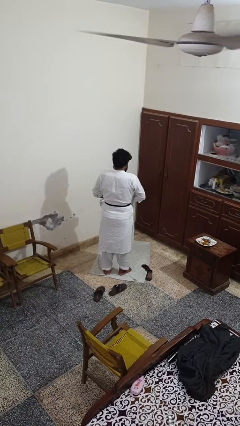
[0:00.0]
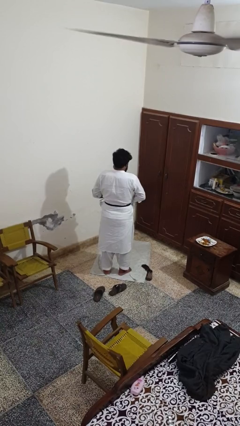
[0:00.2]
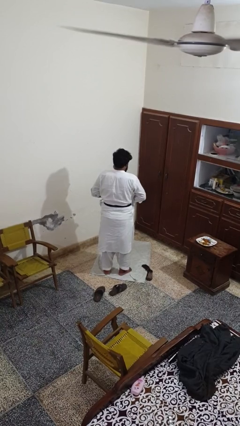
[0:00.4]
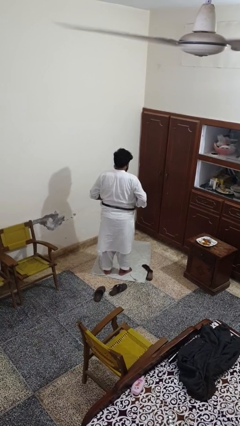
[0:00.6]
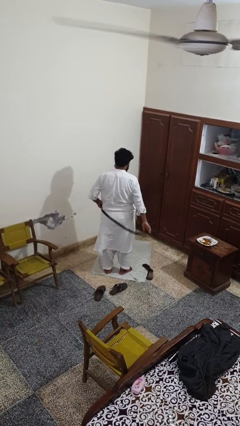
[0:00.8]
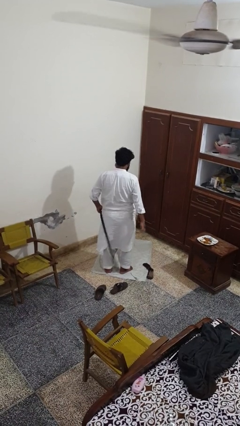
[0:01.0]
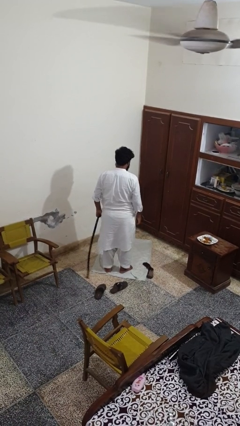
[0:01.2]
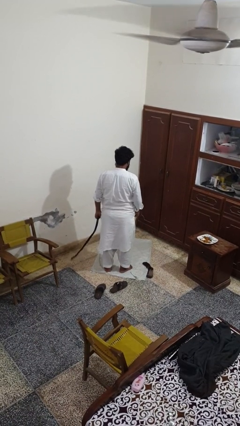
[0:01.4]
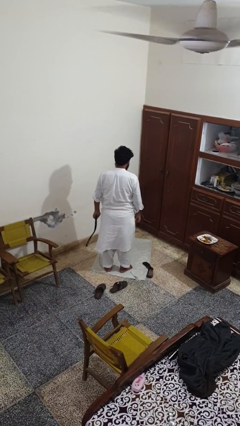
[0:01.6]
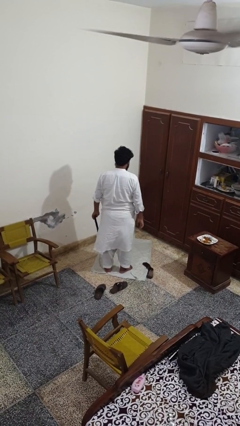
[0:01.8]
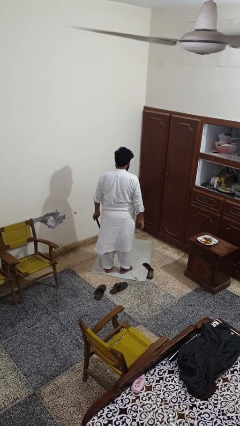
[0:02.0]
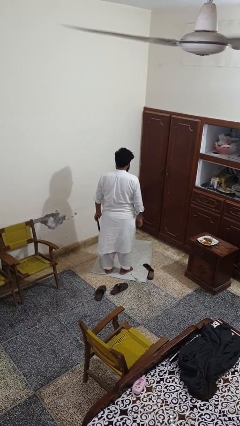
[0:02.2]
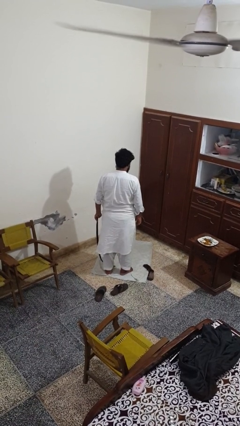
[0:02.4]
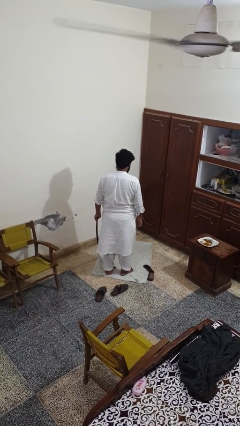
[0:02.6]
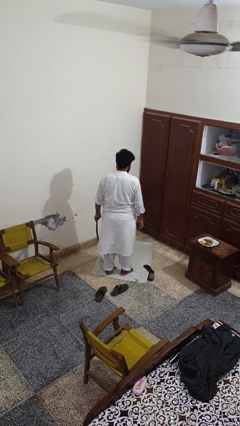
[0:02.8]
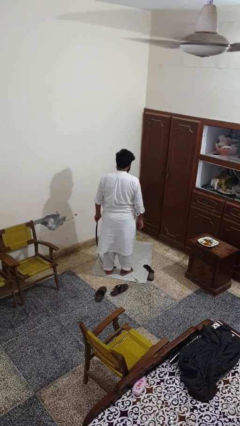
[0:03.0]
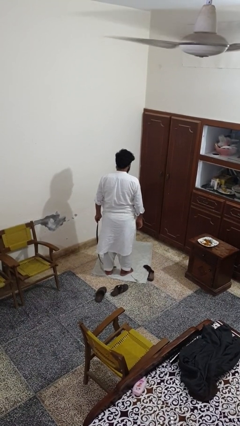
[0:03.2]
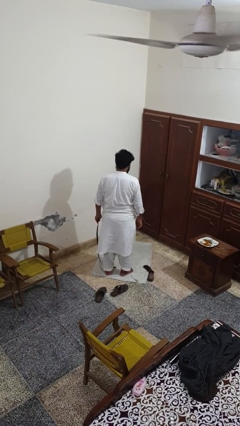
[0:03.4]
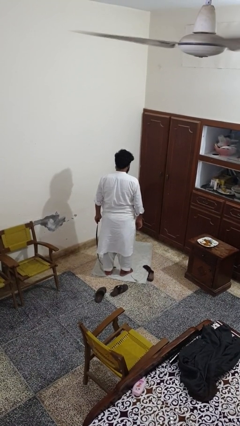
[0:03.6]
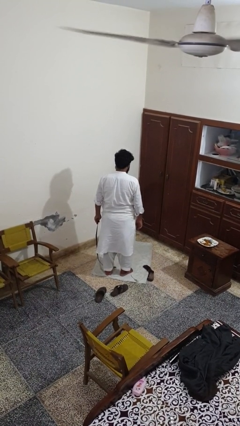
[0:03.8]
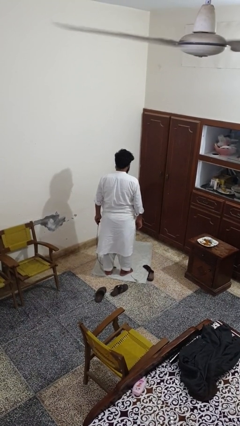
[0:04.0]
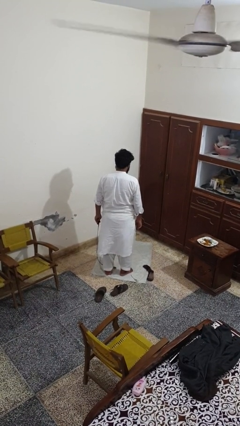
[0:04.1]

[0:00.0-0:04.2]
person takes off belt

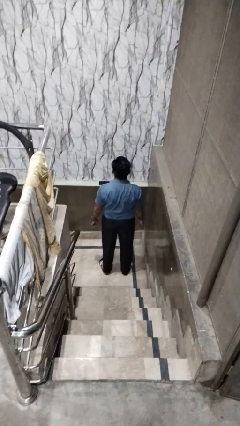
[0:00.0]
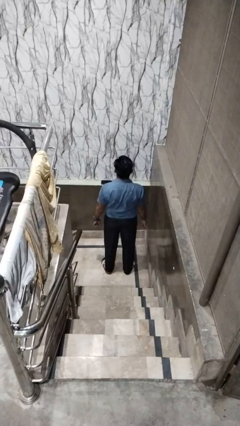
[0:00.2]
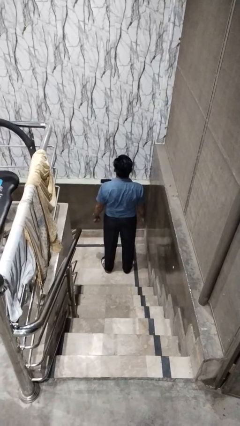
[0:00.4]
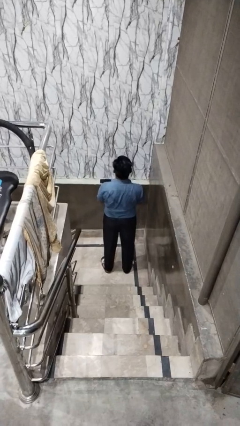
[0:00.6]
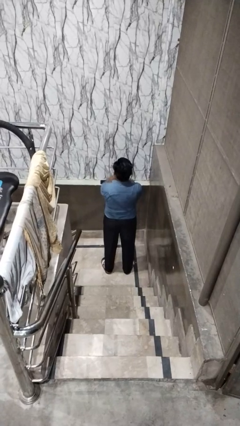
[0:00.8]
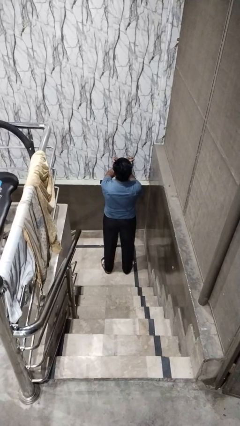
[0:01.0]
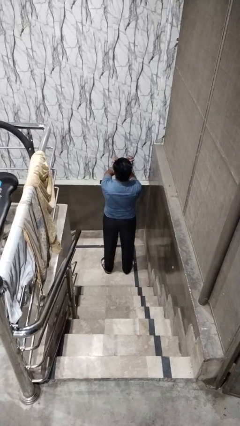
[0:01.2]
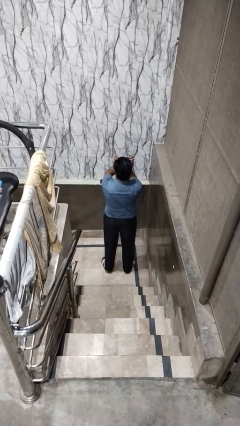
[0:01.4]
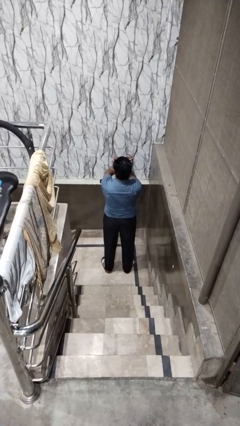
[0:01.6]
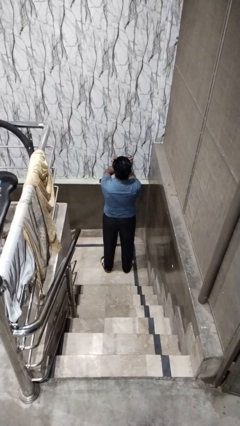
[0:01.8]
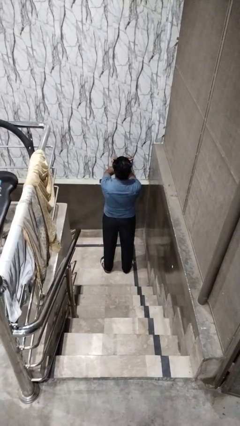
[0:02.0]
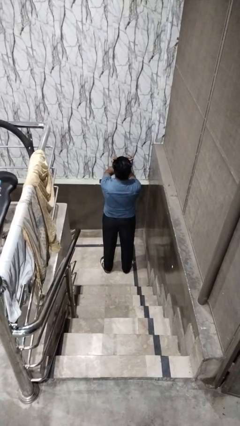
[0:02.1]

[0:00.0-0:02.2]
person gestures arms x

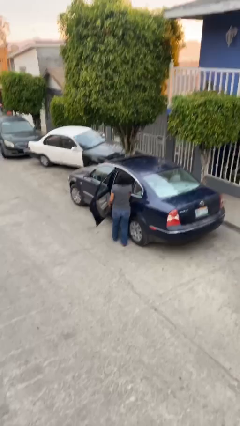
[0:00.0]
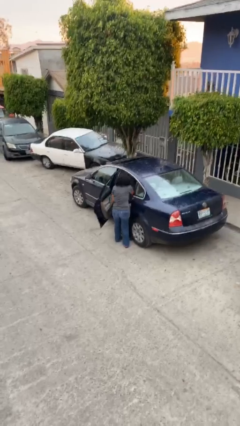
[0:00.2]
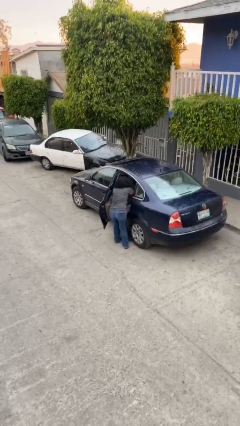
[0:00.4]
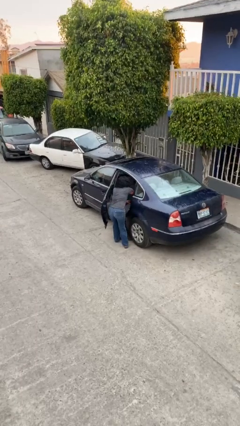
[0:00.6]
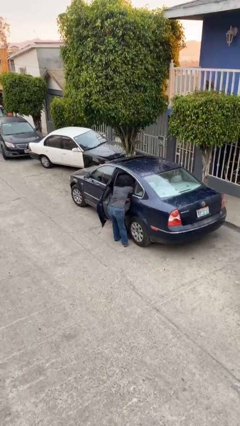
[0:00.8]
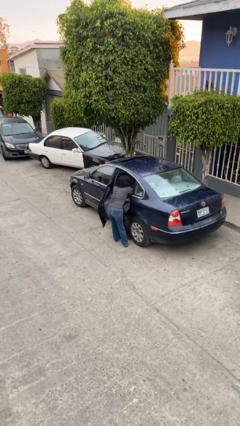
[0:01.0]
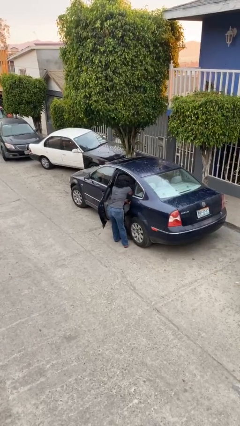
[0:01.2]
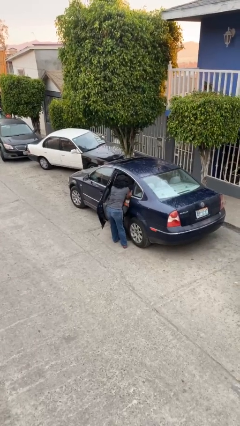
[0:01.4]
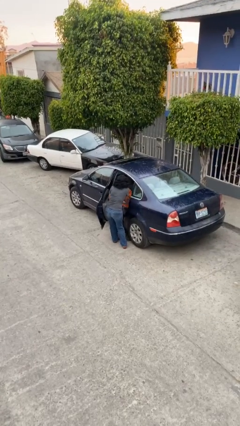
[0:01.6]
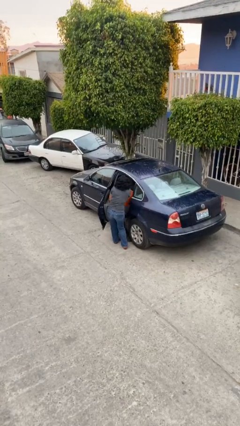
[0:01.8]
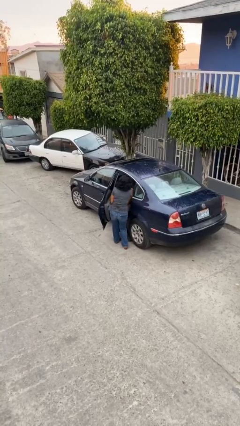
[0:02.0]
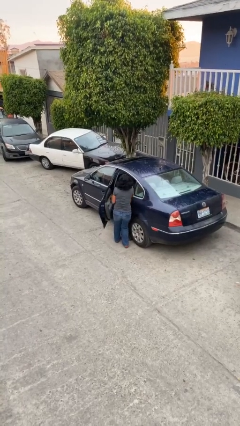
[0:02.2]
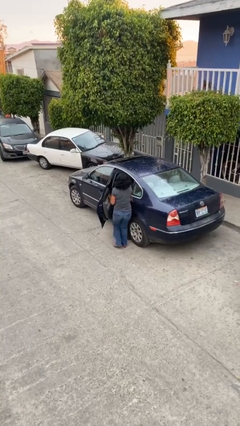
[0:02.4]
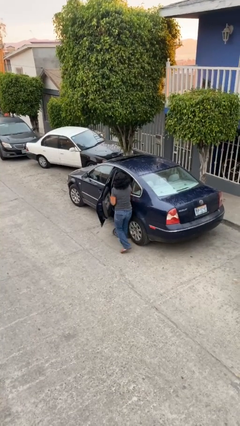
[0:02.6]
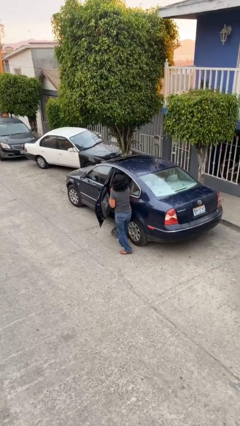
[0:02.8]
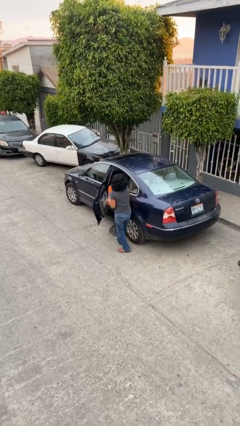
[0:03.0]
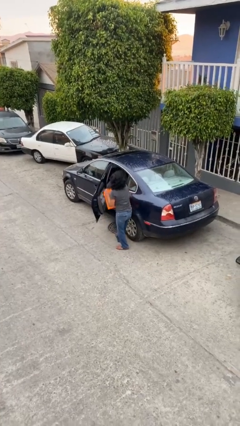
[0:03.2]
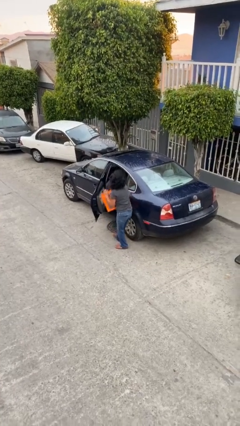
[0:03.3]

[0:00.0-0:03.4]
person unloads car

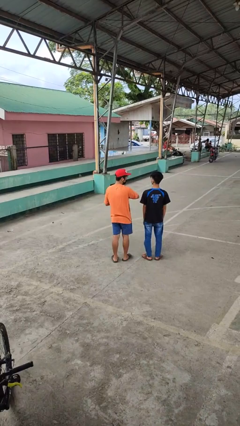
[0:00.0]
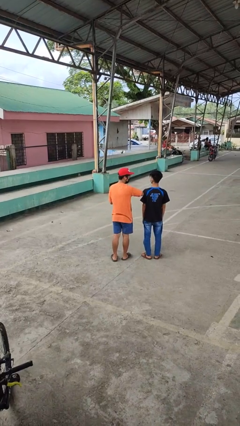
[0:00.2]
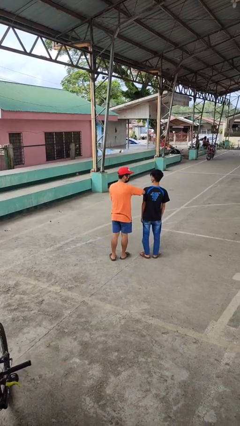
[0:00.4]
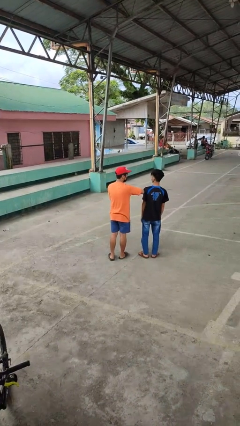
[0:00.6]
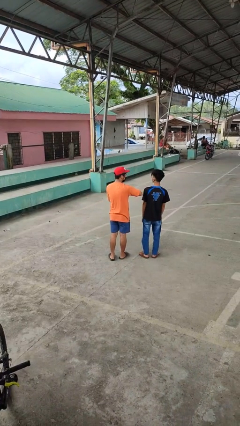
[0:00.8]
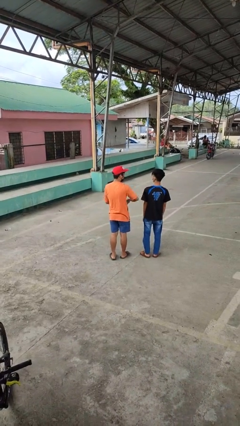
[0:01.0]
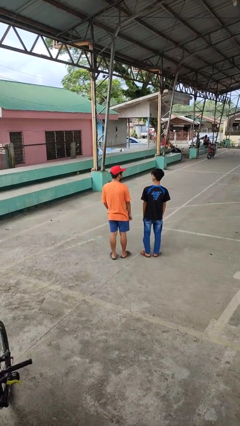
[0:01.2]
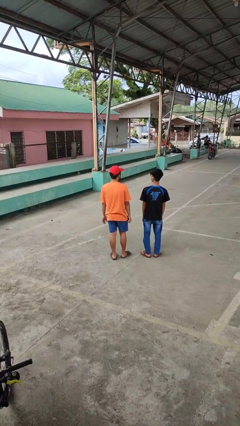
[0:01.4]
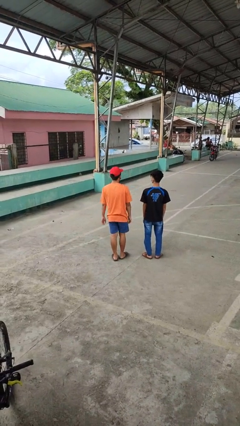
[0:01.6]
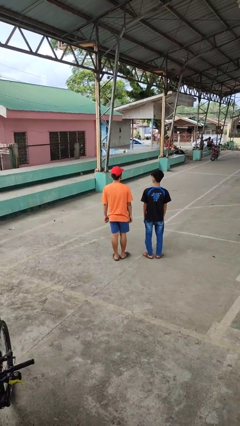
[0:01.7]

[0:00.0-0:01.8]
person nudges person with elbow

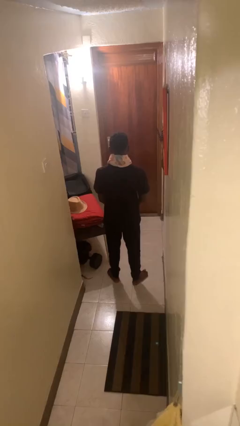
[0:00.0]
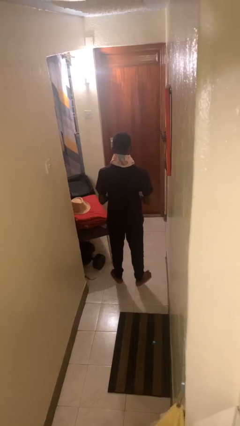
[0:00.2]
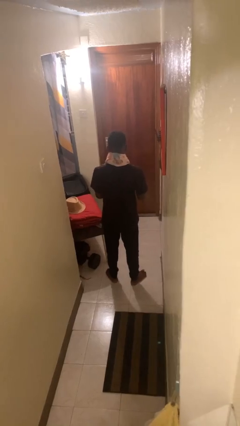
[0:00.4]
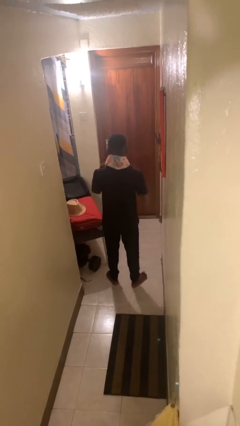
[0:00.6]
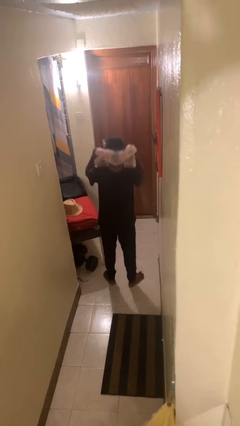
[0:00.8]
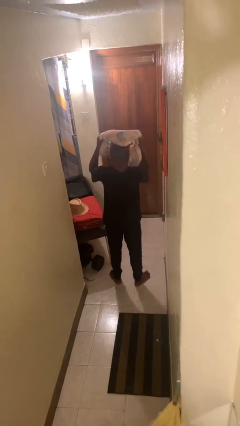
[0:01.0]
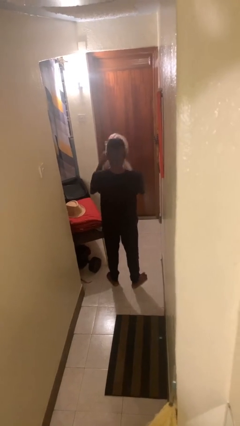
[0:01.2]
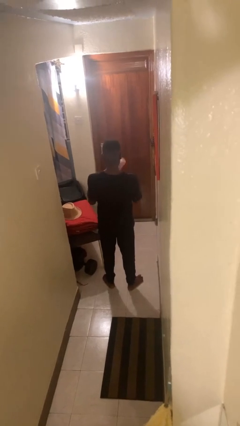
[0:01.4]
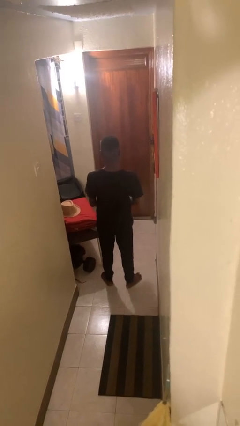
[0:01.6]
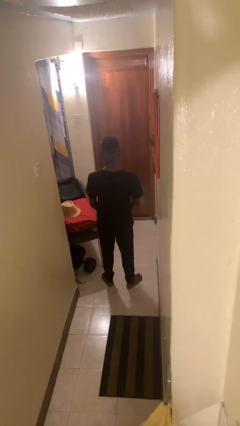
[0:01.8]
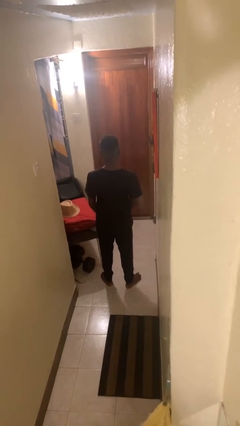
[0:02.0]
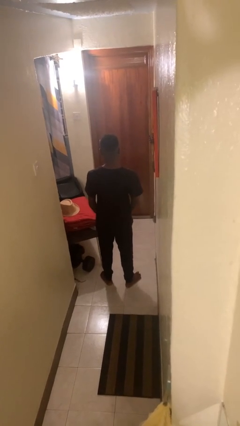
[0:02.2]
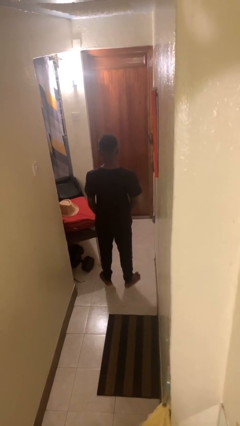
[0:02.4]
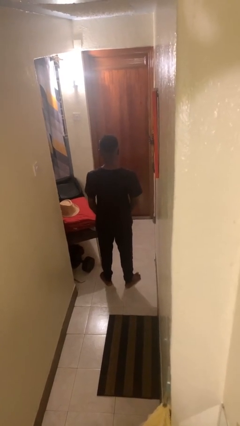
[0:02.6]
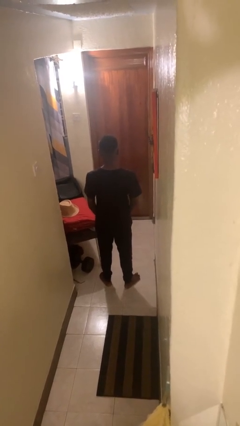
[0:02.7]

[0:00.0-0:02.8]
person takes off scarf

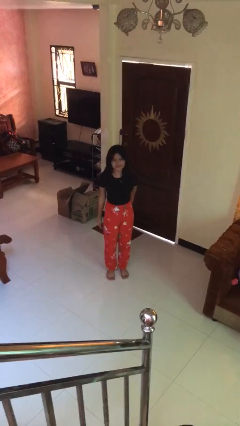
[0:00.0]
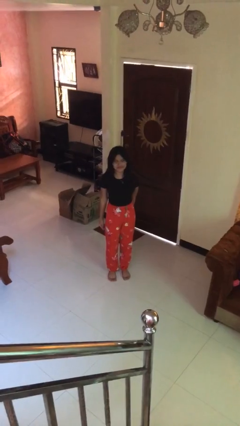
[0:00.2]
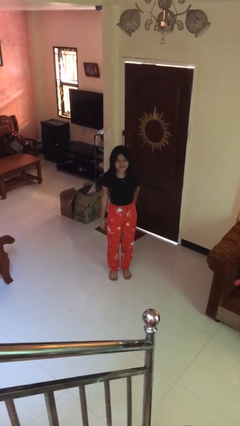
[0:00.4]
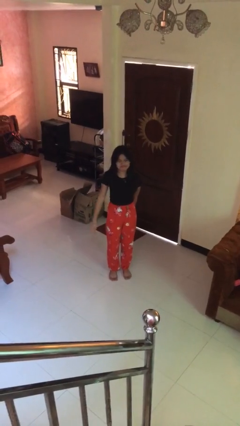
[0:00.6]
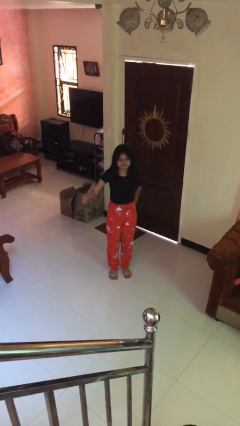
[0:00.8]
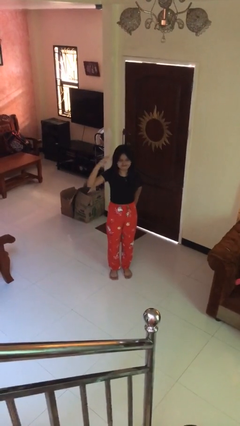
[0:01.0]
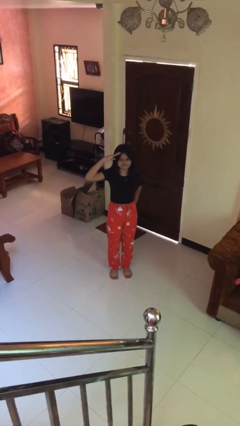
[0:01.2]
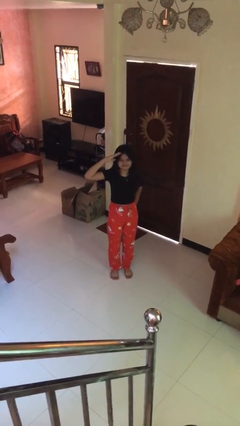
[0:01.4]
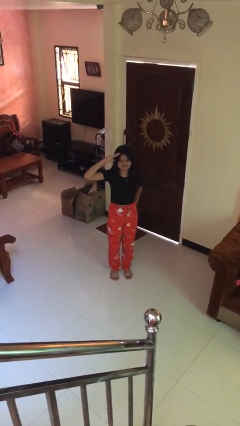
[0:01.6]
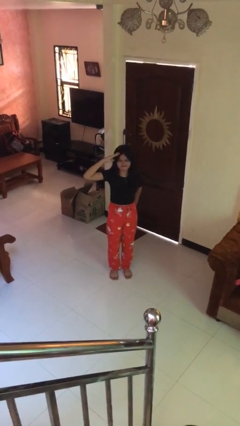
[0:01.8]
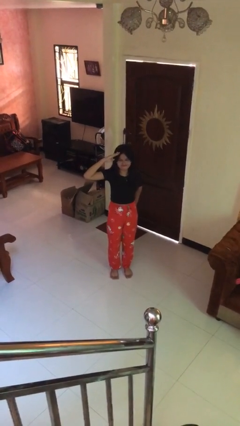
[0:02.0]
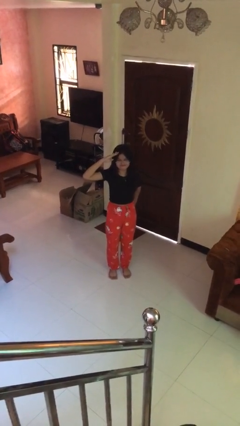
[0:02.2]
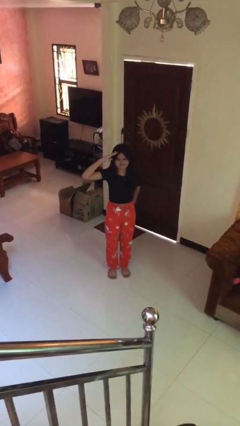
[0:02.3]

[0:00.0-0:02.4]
person salutes

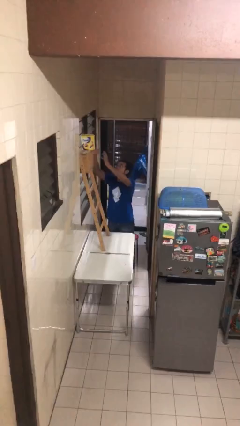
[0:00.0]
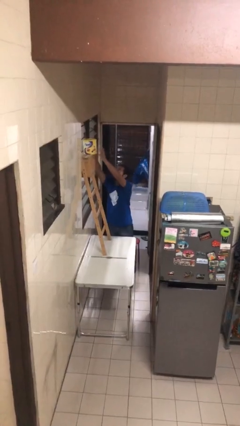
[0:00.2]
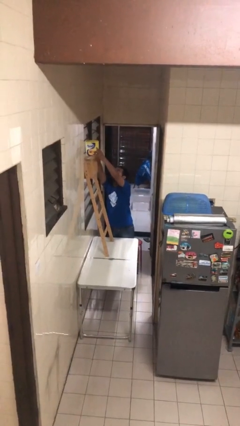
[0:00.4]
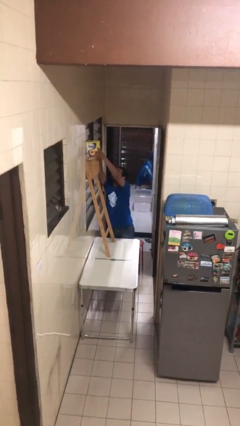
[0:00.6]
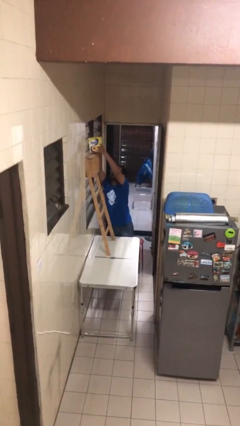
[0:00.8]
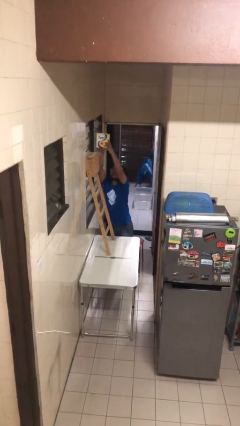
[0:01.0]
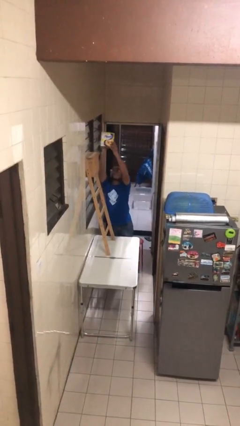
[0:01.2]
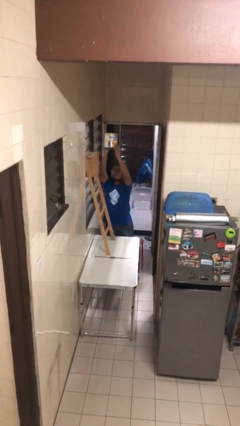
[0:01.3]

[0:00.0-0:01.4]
person picks up object from shelf
